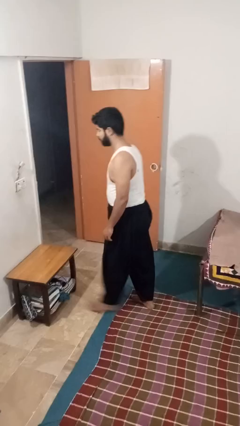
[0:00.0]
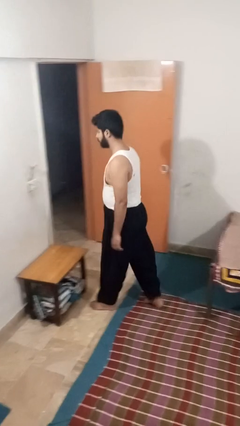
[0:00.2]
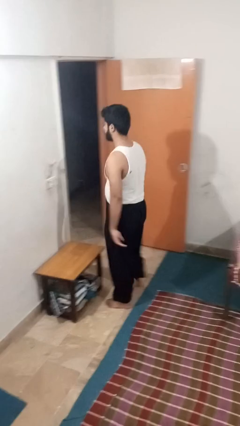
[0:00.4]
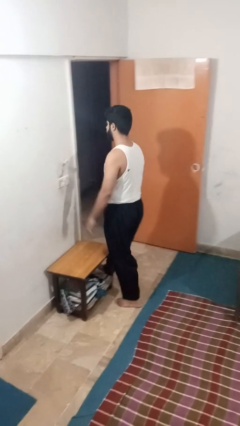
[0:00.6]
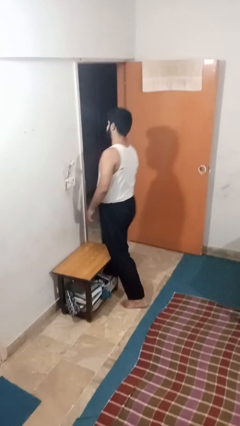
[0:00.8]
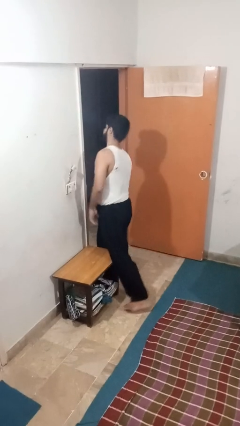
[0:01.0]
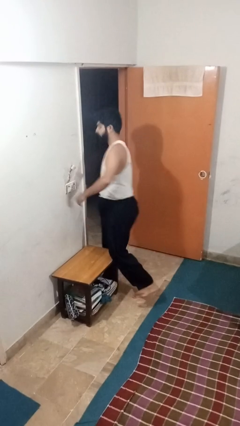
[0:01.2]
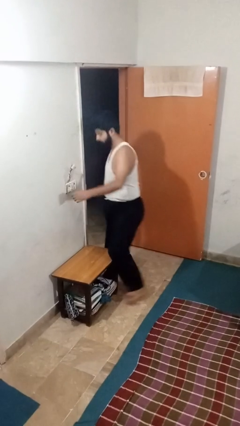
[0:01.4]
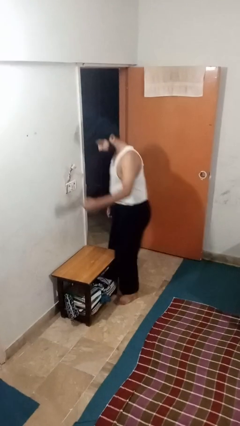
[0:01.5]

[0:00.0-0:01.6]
person bumps into table

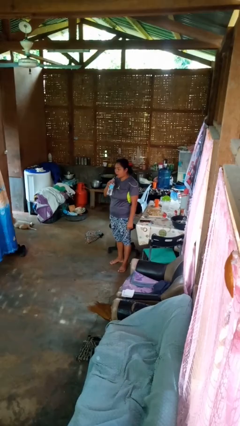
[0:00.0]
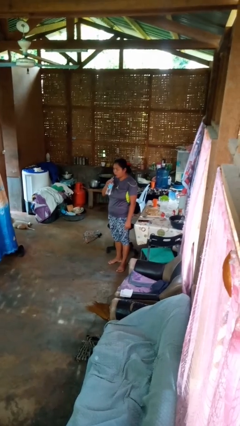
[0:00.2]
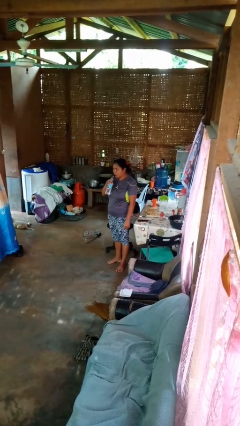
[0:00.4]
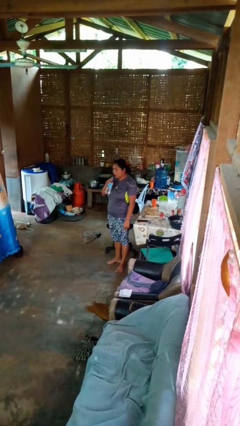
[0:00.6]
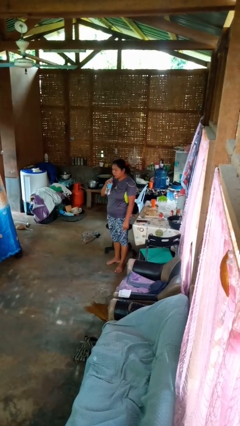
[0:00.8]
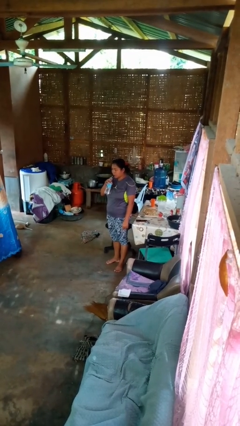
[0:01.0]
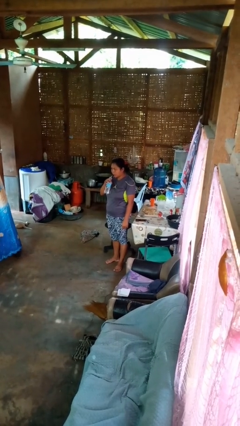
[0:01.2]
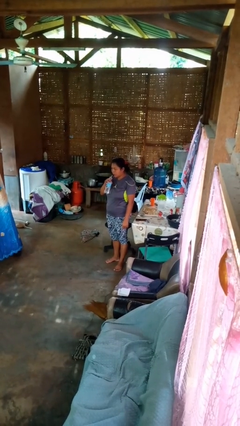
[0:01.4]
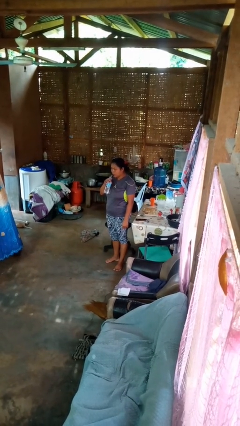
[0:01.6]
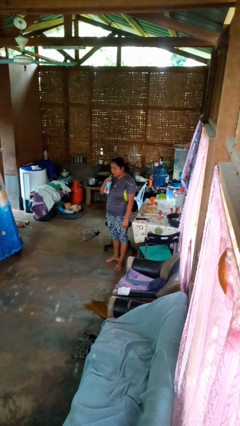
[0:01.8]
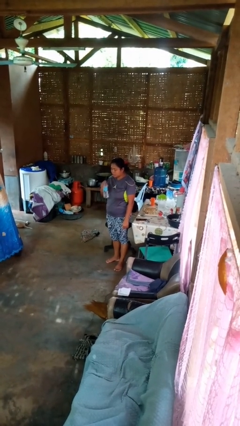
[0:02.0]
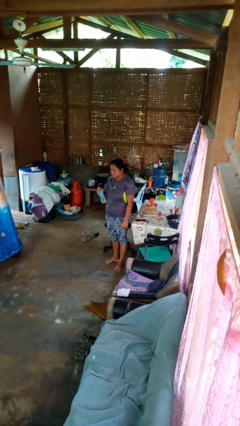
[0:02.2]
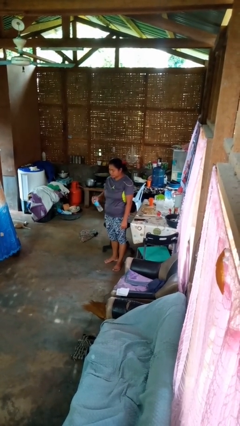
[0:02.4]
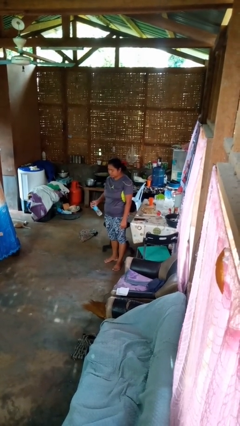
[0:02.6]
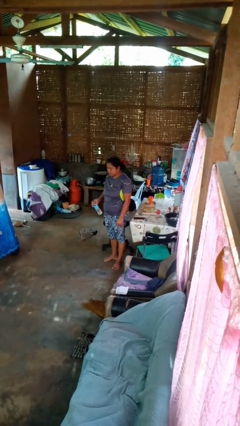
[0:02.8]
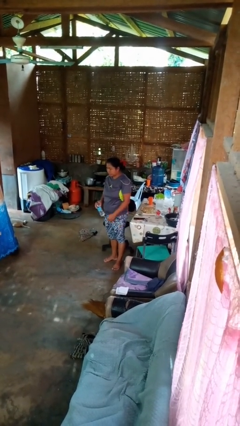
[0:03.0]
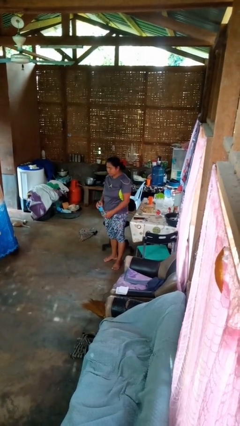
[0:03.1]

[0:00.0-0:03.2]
person drinks from straw

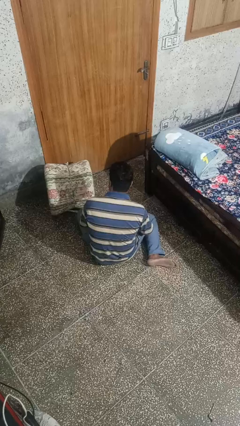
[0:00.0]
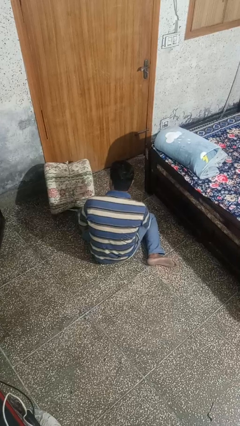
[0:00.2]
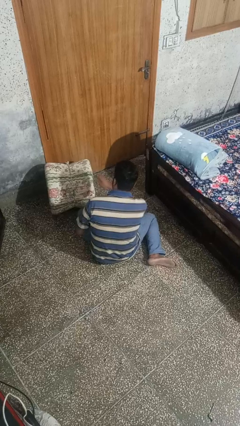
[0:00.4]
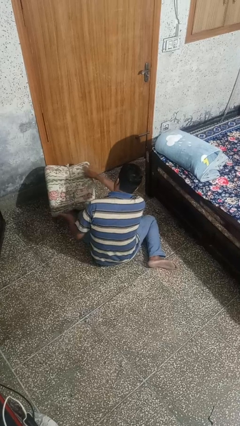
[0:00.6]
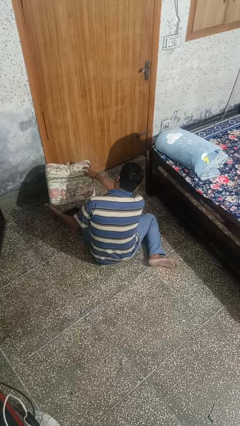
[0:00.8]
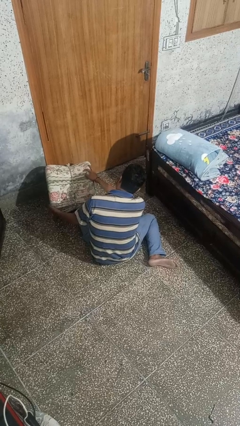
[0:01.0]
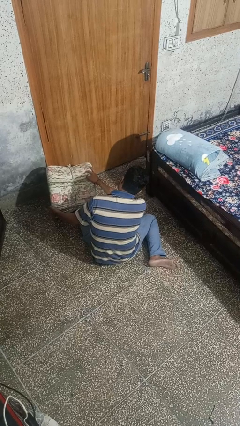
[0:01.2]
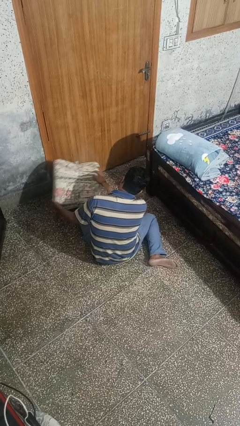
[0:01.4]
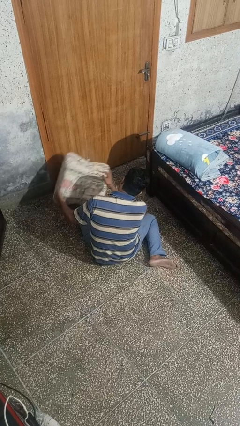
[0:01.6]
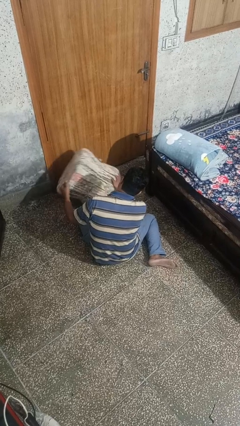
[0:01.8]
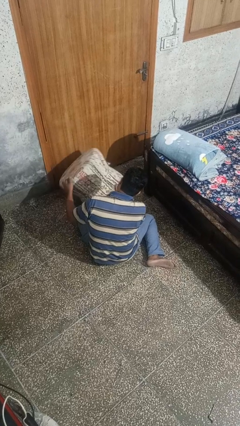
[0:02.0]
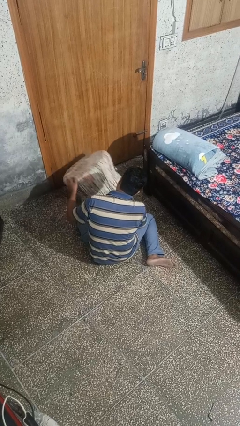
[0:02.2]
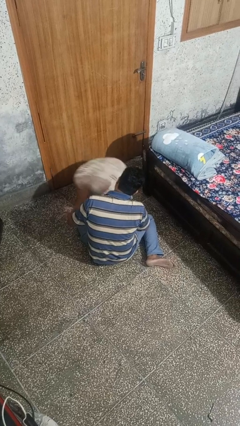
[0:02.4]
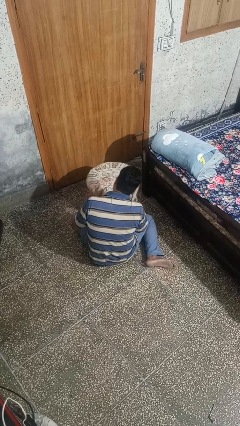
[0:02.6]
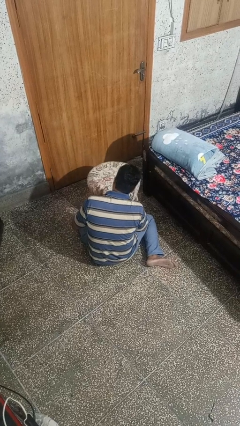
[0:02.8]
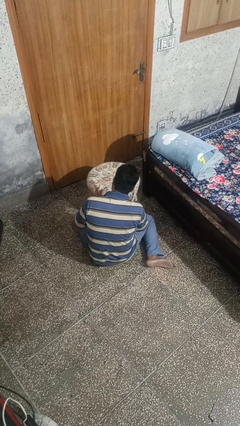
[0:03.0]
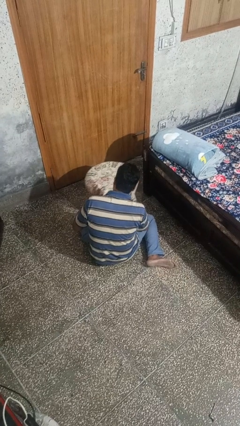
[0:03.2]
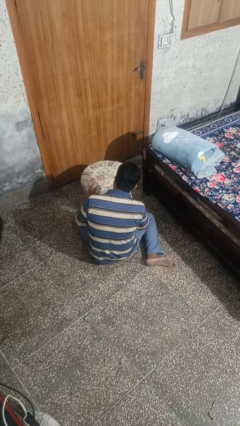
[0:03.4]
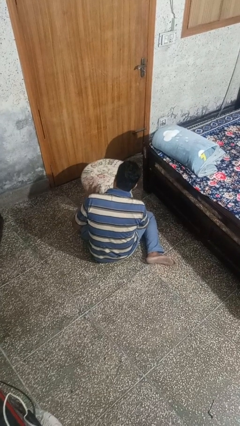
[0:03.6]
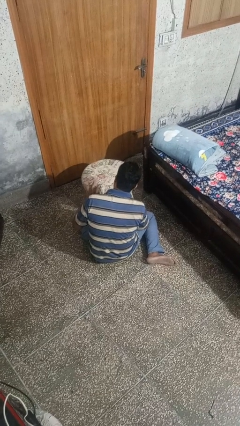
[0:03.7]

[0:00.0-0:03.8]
person sets upright furniture

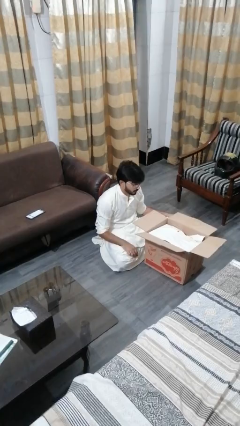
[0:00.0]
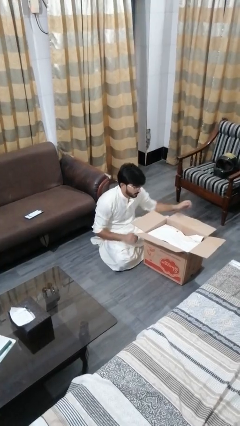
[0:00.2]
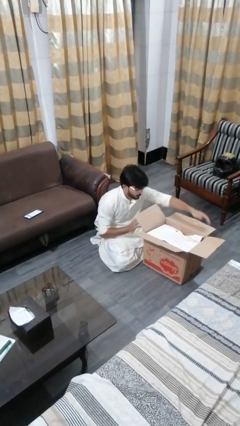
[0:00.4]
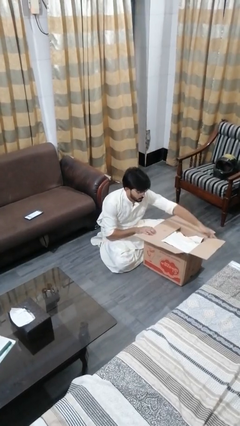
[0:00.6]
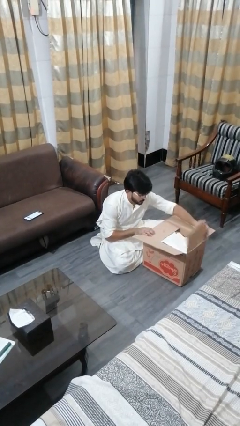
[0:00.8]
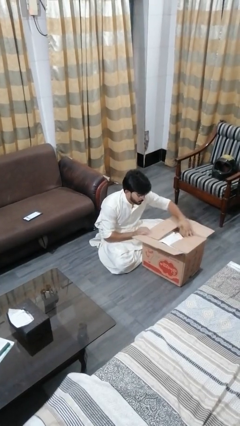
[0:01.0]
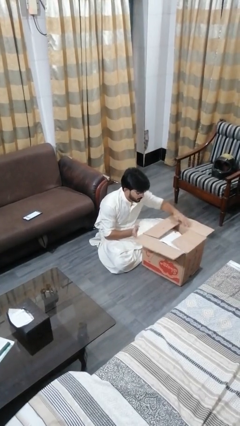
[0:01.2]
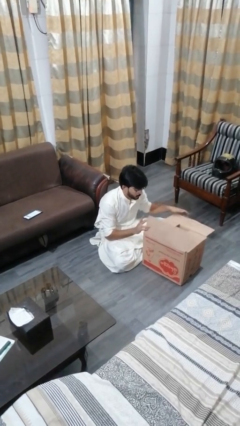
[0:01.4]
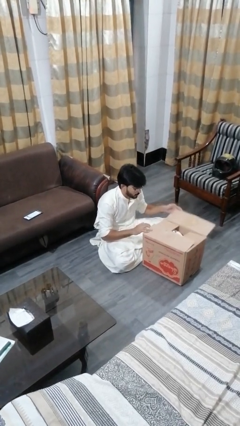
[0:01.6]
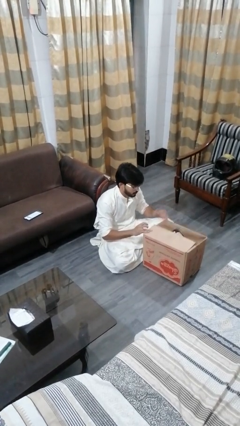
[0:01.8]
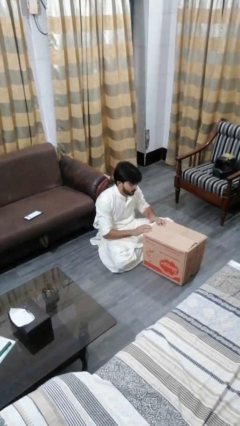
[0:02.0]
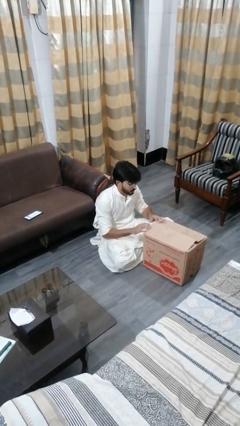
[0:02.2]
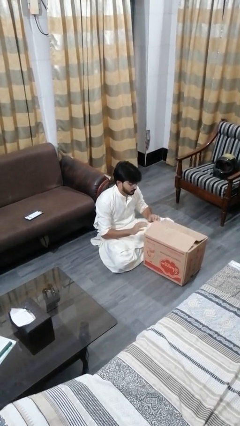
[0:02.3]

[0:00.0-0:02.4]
person closes box

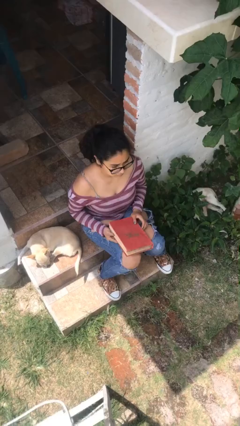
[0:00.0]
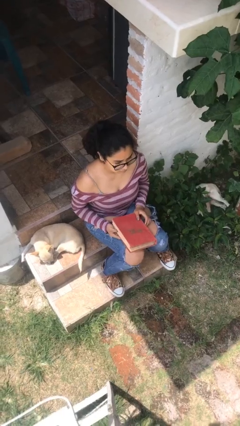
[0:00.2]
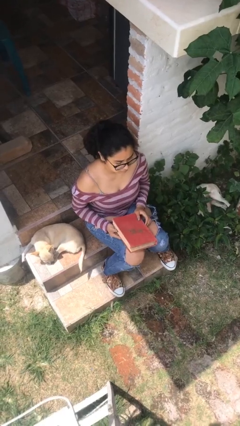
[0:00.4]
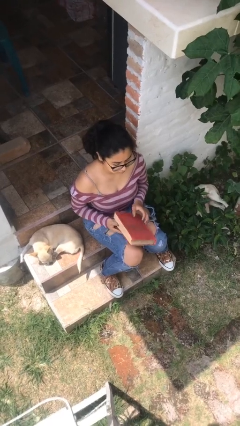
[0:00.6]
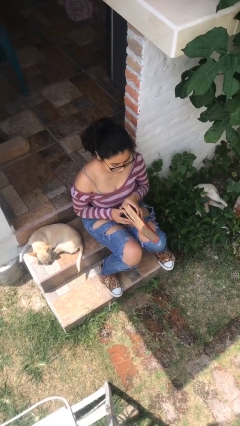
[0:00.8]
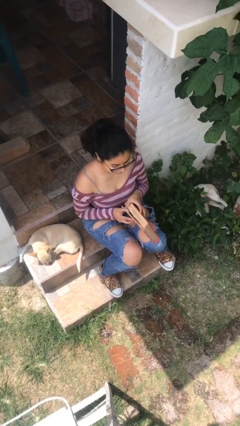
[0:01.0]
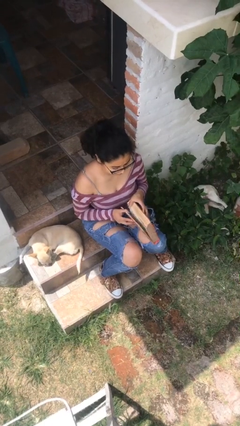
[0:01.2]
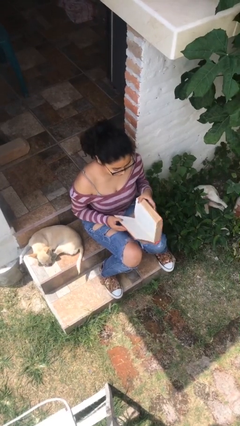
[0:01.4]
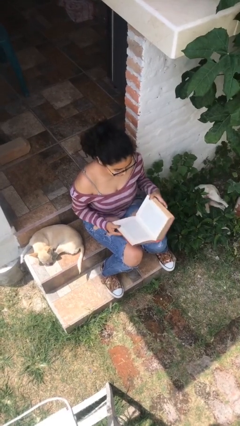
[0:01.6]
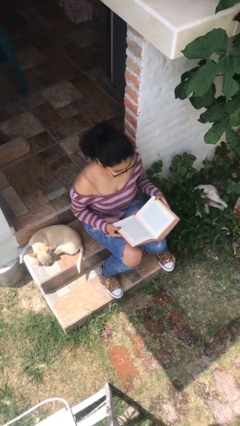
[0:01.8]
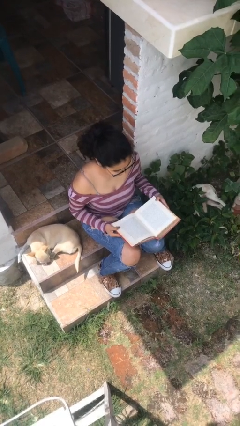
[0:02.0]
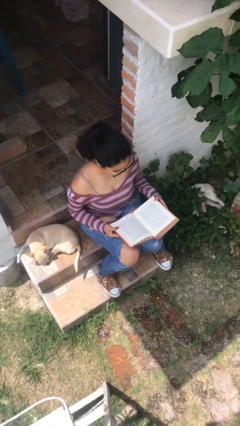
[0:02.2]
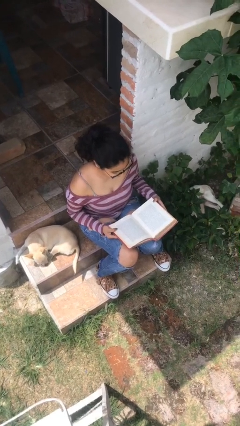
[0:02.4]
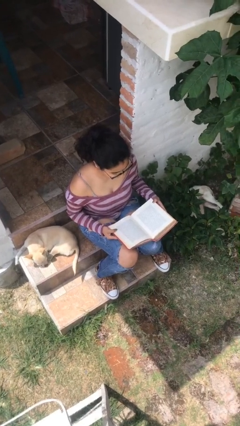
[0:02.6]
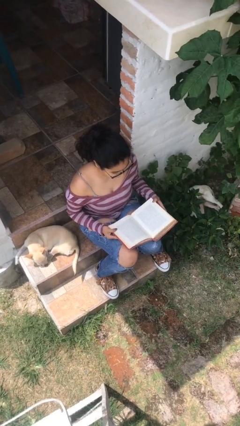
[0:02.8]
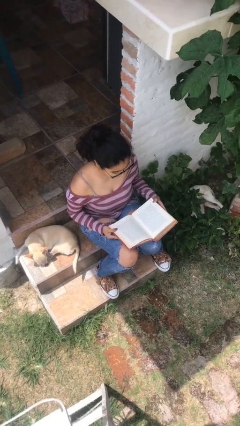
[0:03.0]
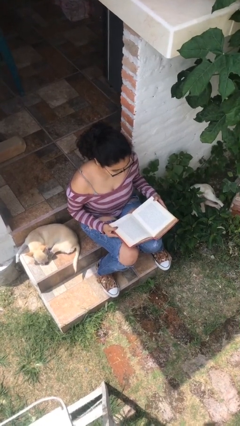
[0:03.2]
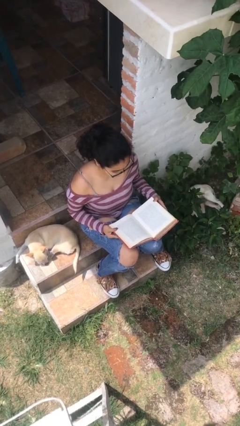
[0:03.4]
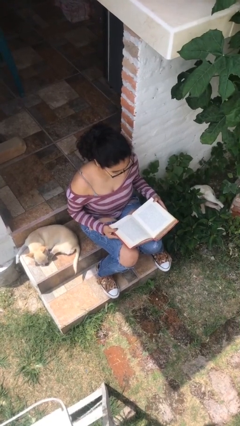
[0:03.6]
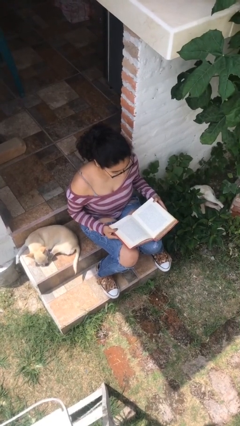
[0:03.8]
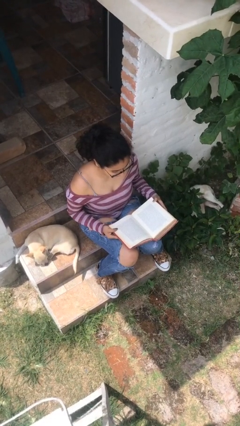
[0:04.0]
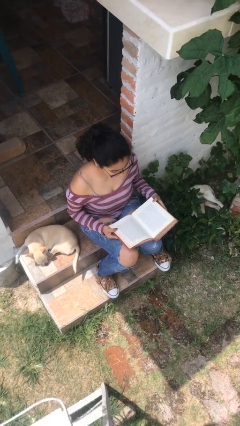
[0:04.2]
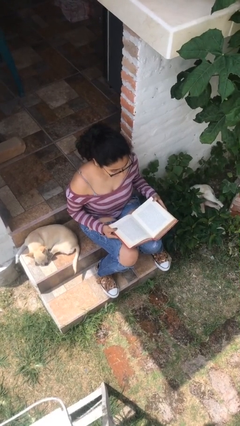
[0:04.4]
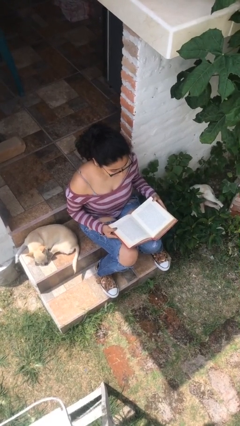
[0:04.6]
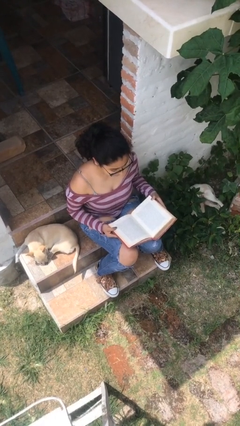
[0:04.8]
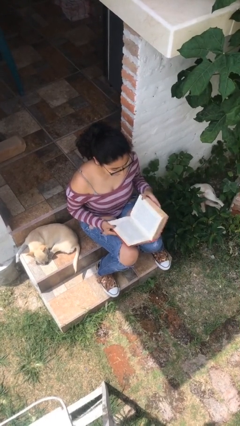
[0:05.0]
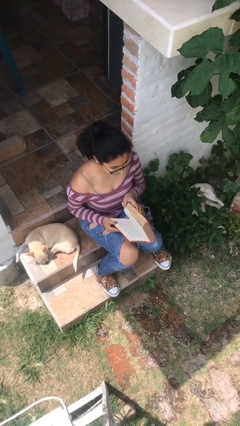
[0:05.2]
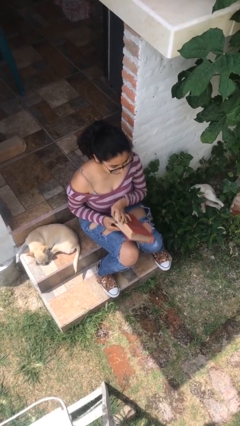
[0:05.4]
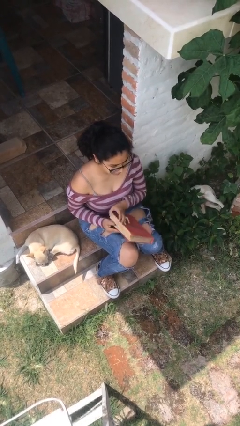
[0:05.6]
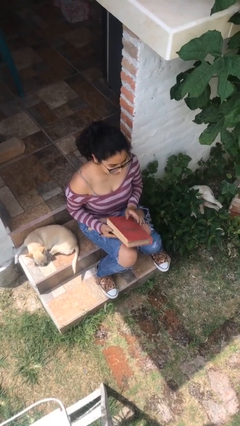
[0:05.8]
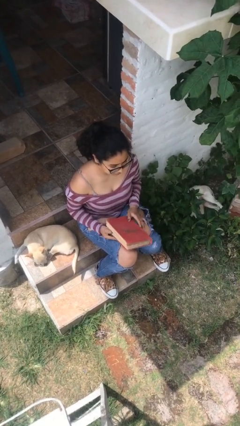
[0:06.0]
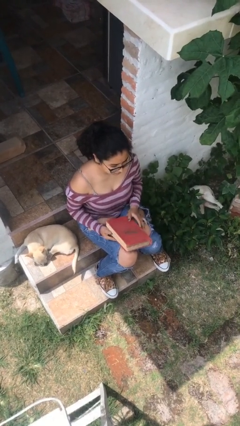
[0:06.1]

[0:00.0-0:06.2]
person reads book

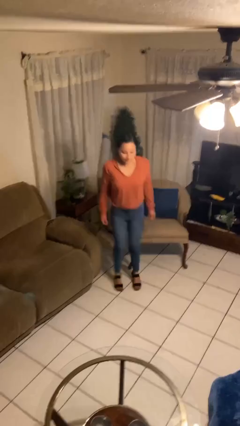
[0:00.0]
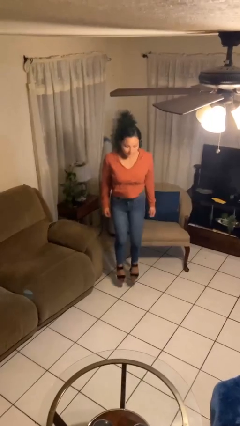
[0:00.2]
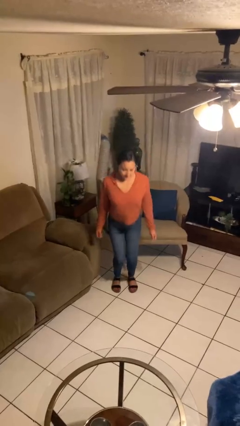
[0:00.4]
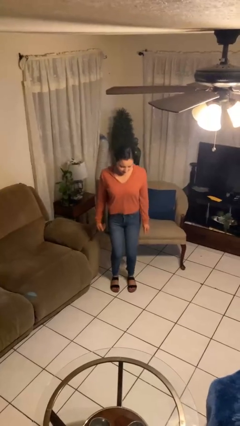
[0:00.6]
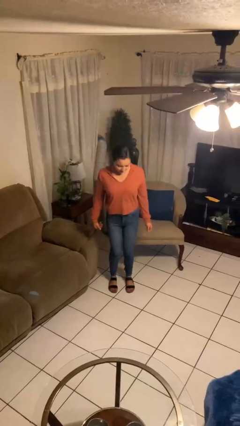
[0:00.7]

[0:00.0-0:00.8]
person jumps
